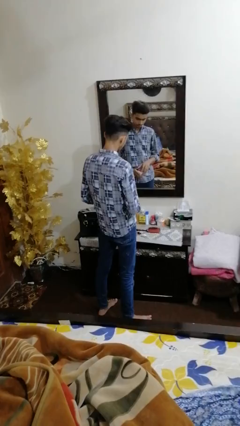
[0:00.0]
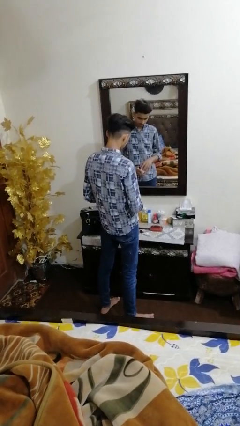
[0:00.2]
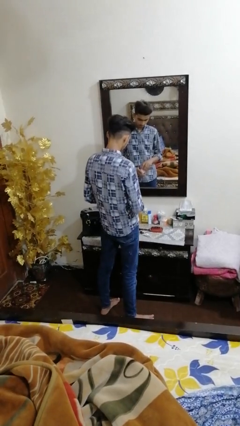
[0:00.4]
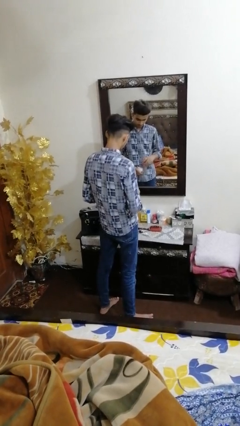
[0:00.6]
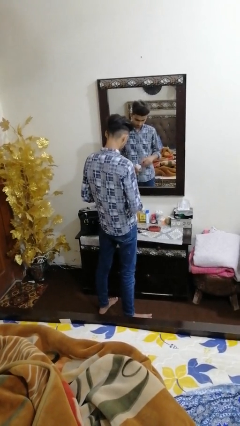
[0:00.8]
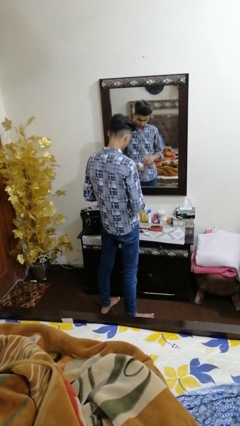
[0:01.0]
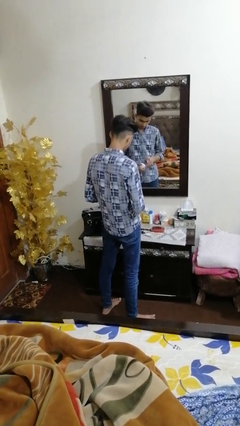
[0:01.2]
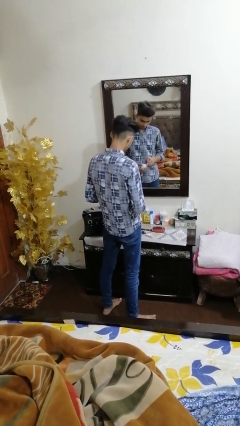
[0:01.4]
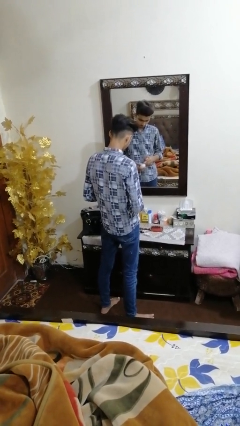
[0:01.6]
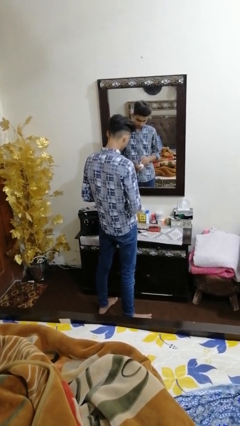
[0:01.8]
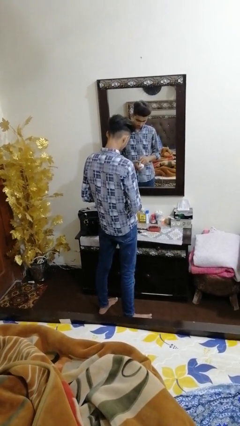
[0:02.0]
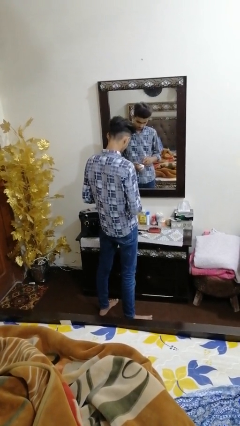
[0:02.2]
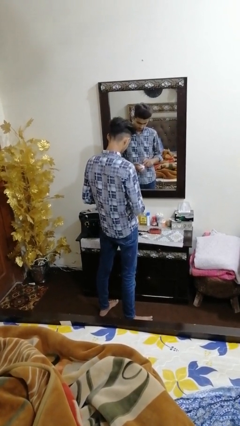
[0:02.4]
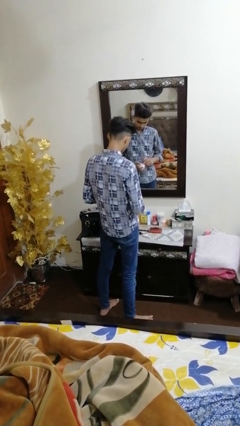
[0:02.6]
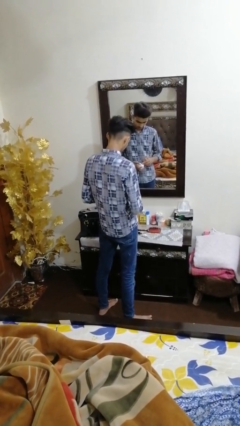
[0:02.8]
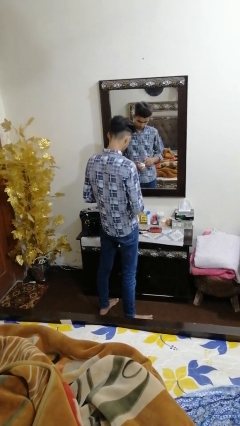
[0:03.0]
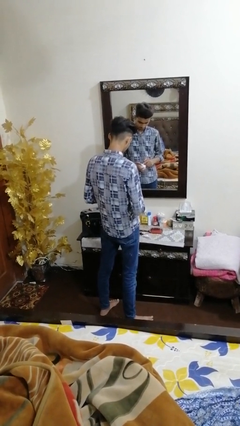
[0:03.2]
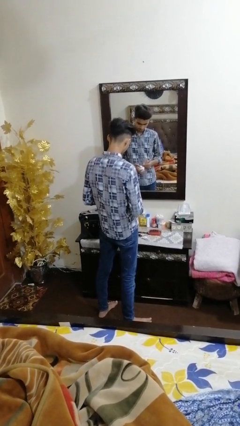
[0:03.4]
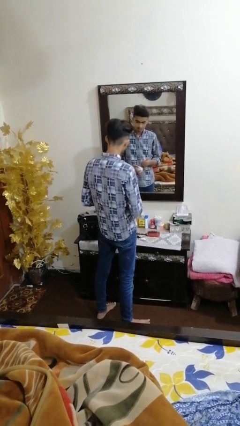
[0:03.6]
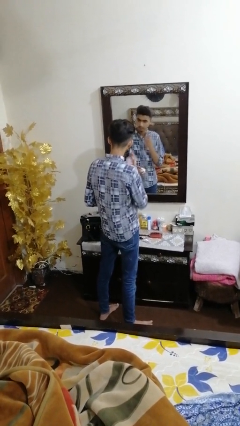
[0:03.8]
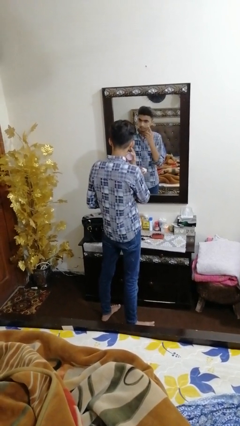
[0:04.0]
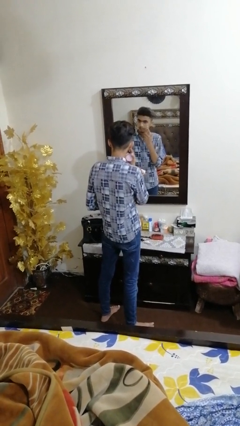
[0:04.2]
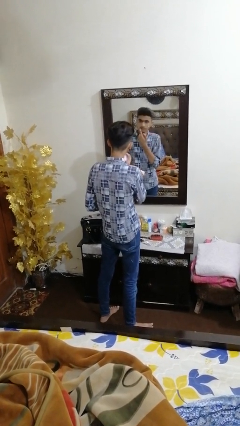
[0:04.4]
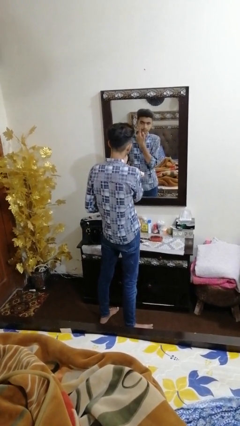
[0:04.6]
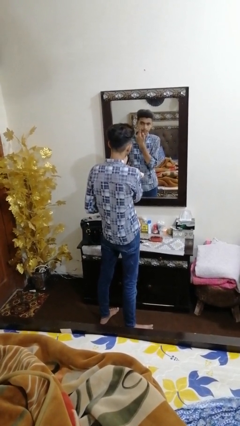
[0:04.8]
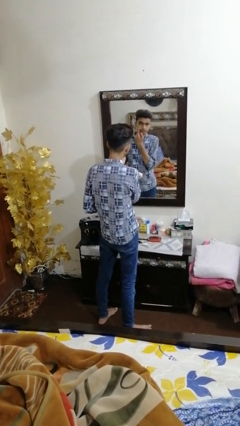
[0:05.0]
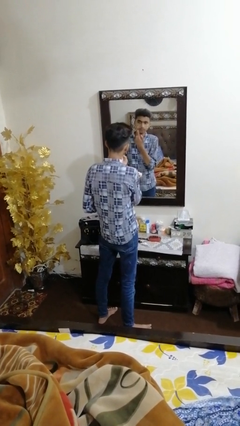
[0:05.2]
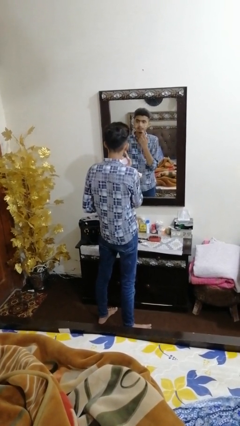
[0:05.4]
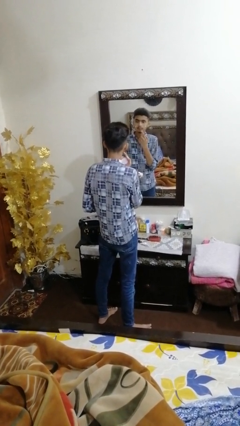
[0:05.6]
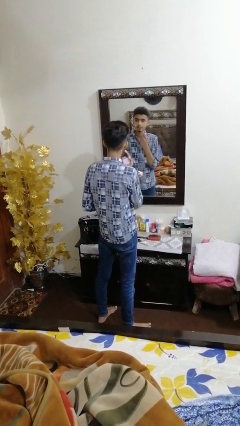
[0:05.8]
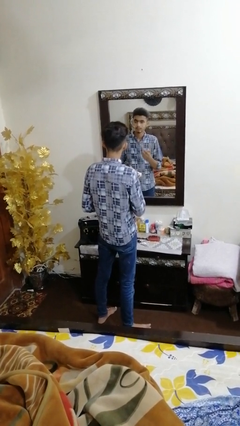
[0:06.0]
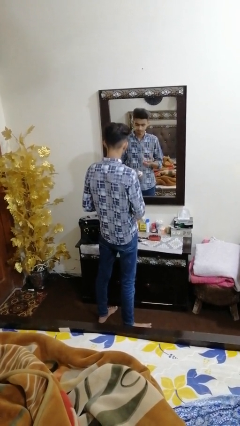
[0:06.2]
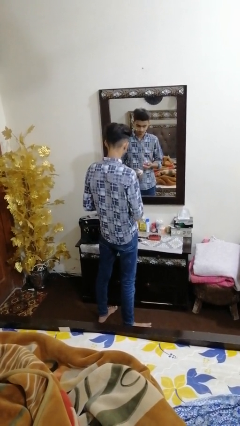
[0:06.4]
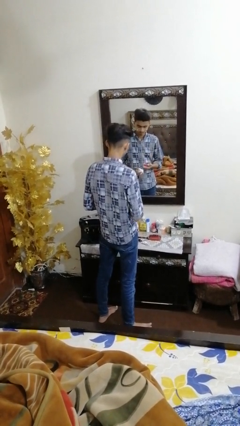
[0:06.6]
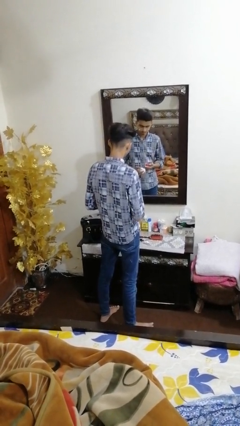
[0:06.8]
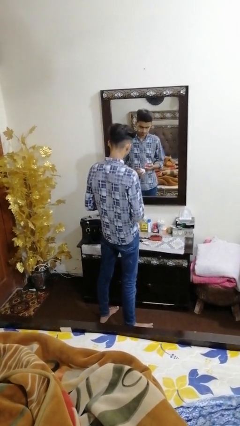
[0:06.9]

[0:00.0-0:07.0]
person applies foundation makeup

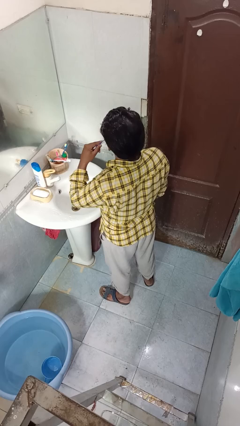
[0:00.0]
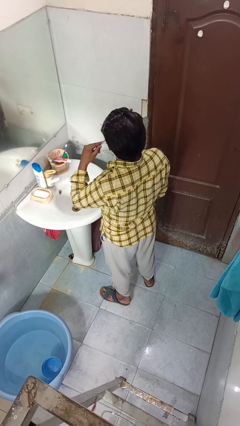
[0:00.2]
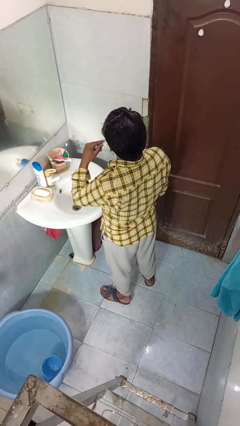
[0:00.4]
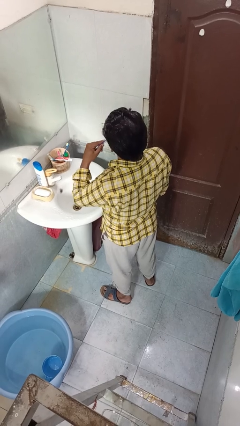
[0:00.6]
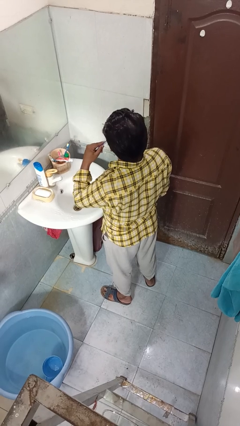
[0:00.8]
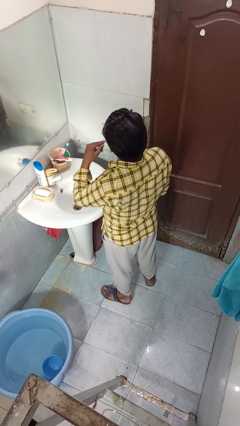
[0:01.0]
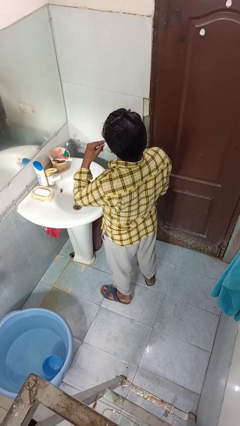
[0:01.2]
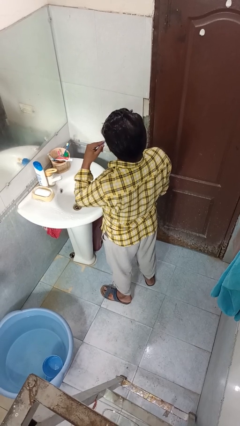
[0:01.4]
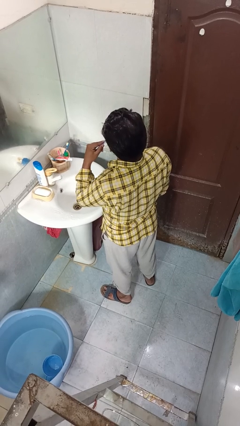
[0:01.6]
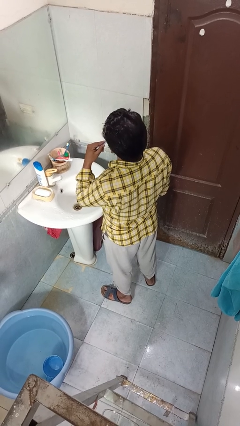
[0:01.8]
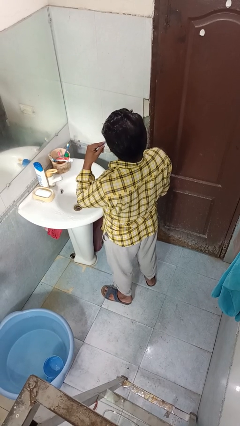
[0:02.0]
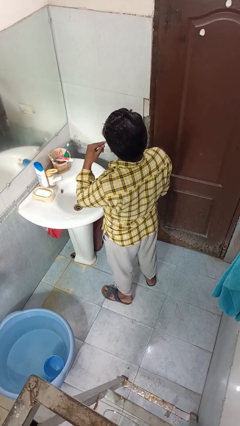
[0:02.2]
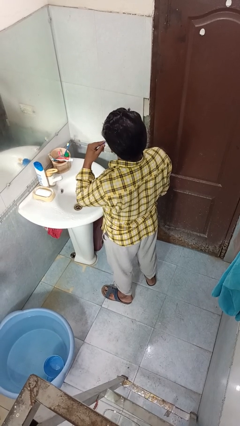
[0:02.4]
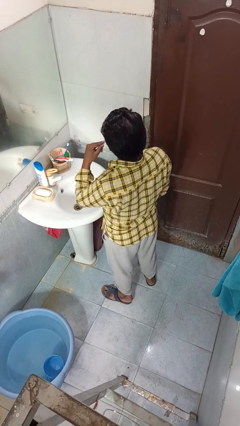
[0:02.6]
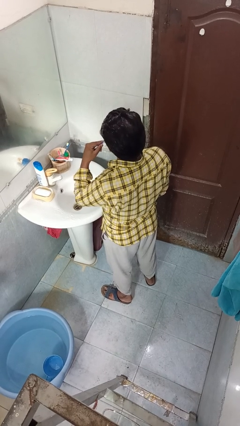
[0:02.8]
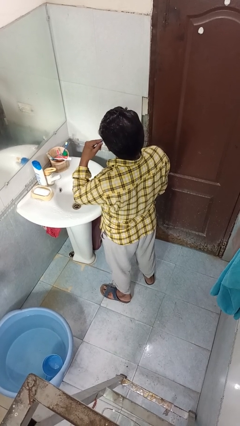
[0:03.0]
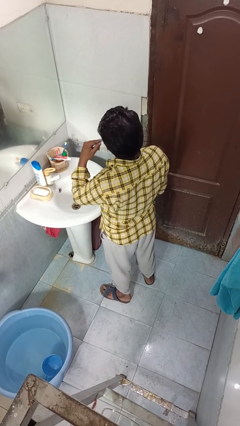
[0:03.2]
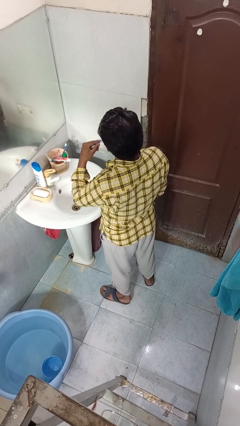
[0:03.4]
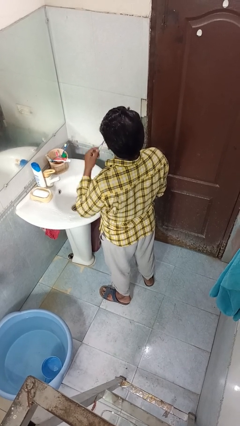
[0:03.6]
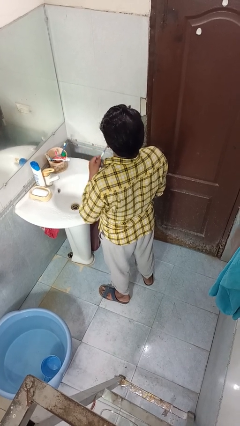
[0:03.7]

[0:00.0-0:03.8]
person brushes teeth

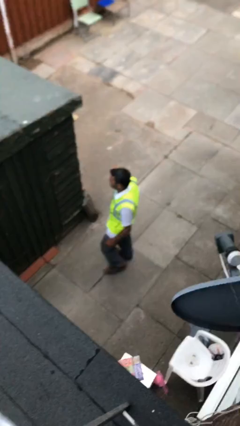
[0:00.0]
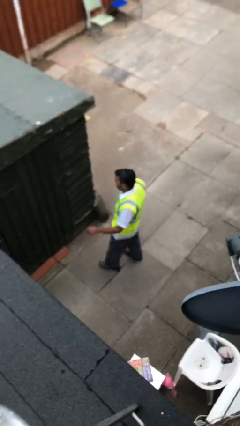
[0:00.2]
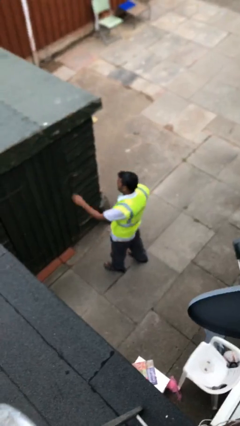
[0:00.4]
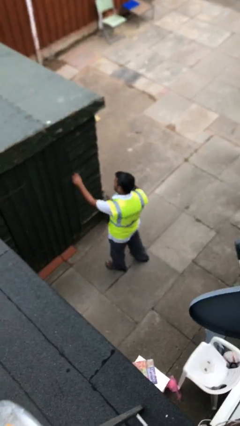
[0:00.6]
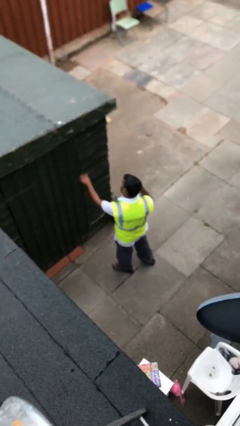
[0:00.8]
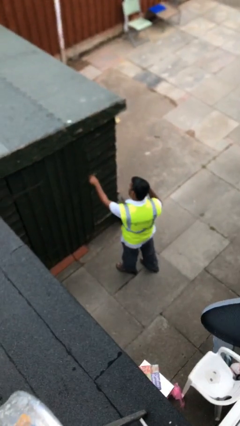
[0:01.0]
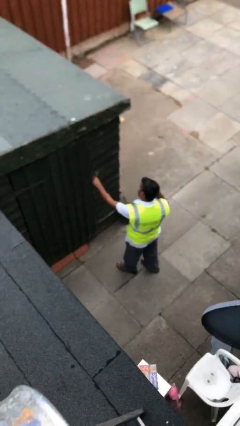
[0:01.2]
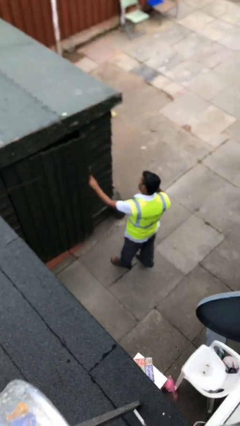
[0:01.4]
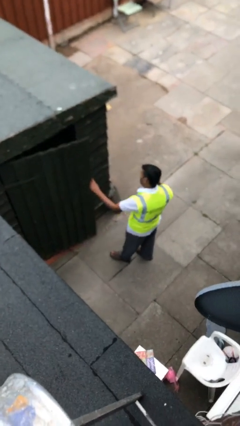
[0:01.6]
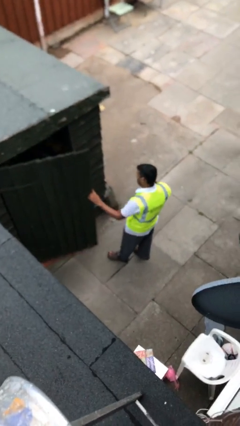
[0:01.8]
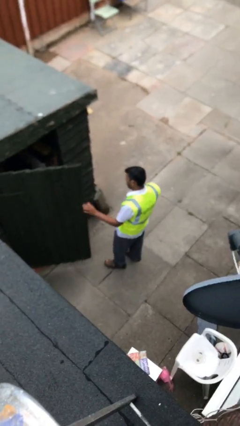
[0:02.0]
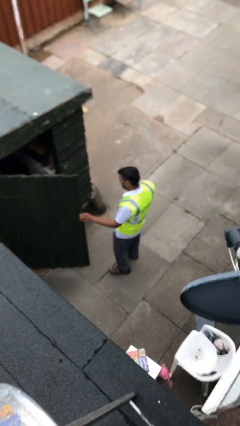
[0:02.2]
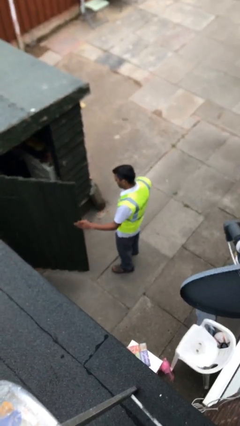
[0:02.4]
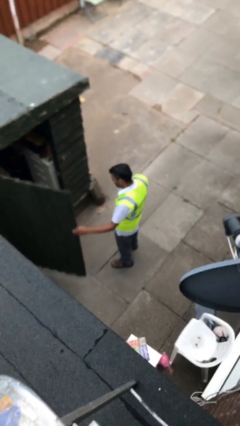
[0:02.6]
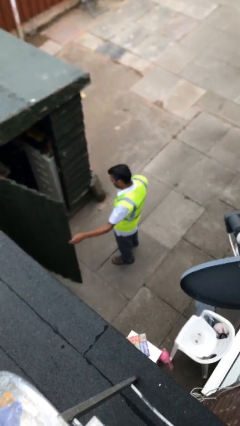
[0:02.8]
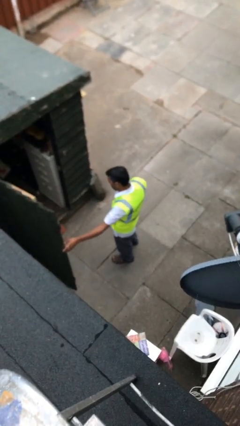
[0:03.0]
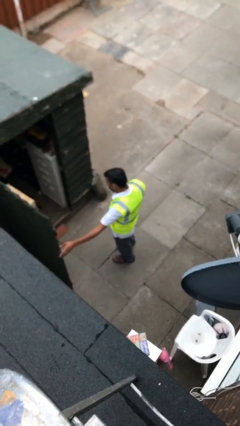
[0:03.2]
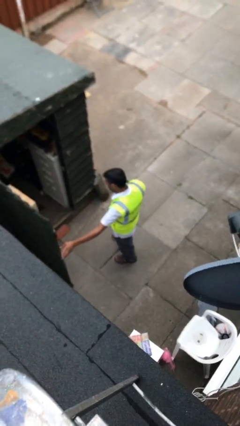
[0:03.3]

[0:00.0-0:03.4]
person opens facility door

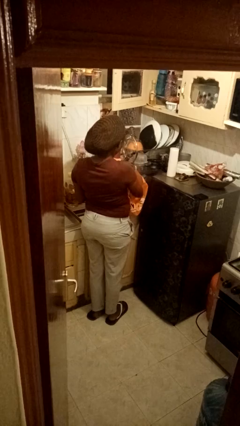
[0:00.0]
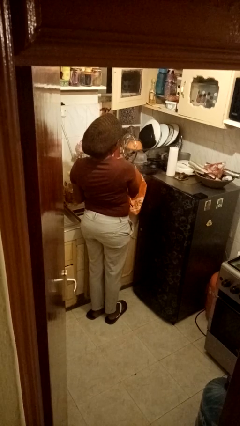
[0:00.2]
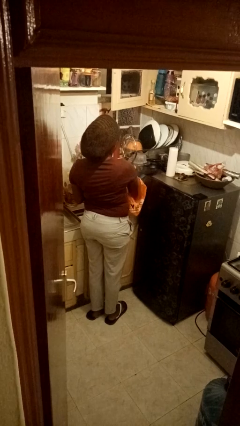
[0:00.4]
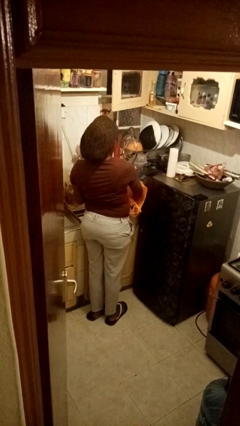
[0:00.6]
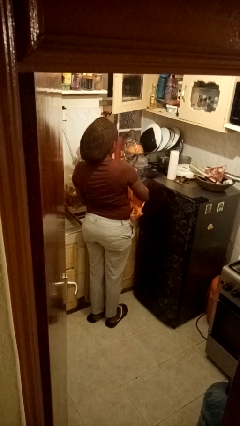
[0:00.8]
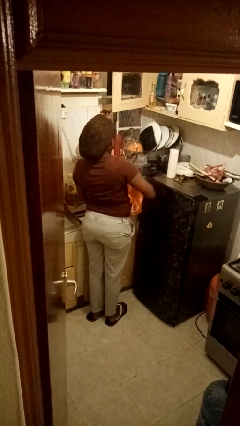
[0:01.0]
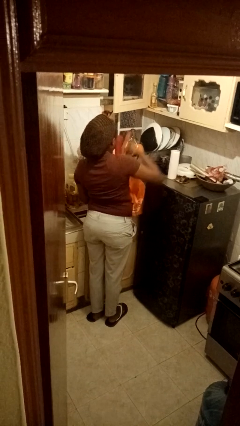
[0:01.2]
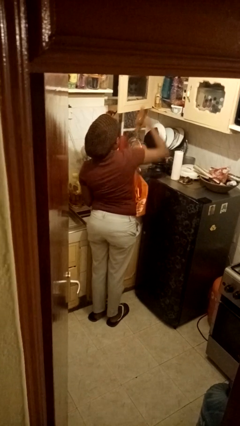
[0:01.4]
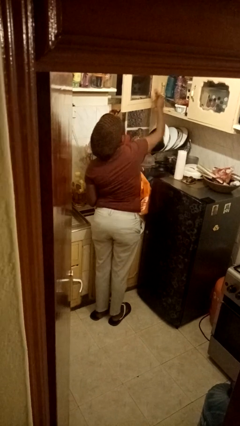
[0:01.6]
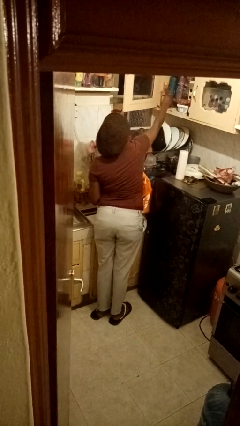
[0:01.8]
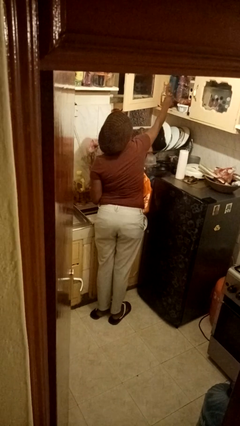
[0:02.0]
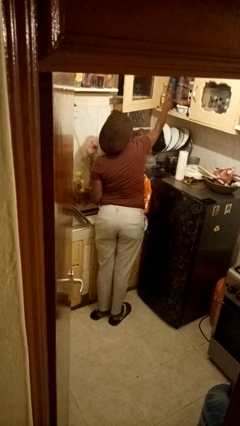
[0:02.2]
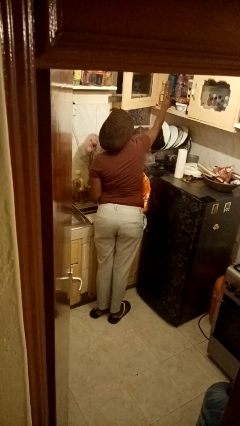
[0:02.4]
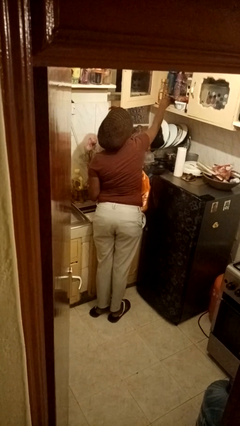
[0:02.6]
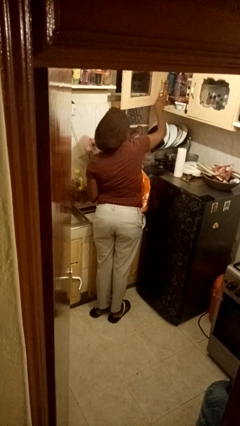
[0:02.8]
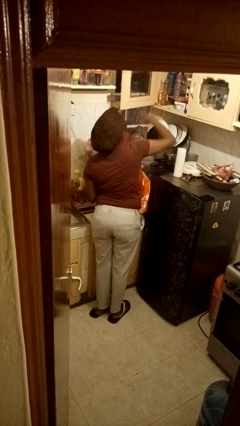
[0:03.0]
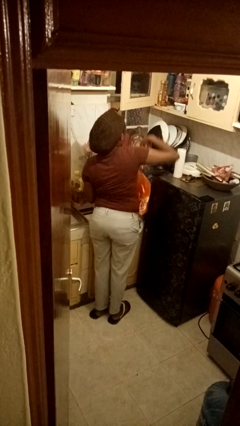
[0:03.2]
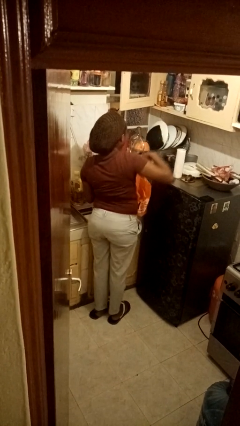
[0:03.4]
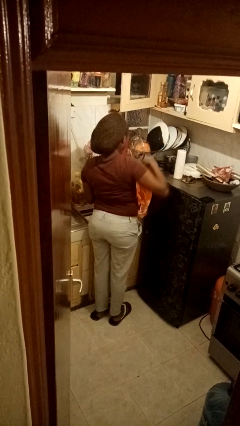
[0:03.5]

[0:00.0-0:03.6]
person loads groceries into cabinet
